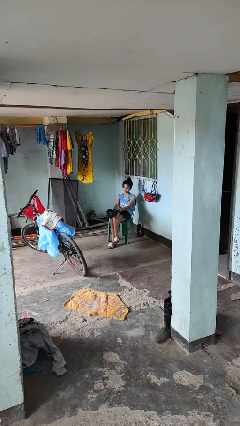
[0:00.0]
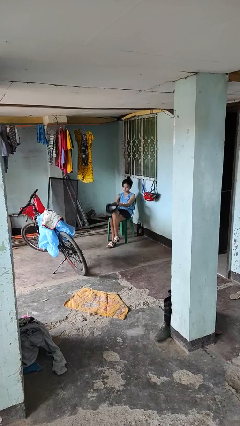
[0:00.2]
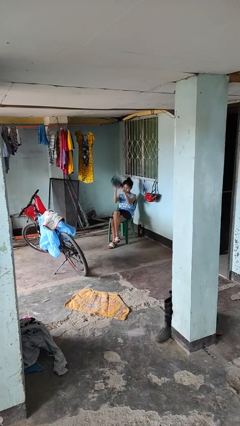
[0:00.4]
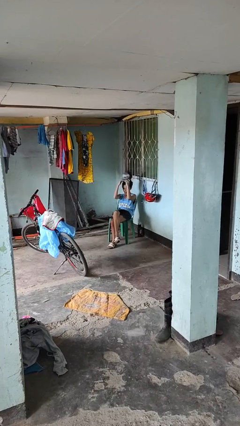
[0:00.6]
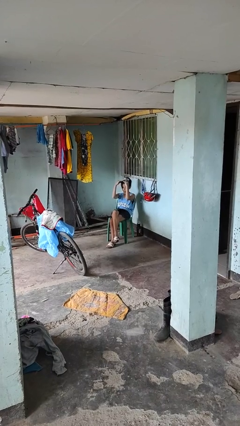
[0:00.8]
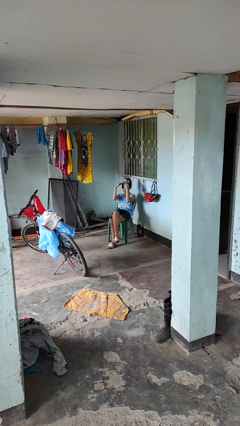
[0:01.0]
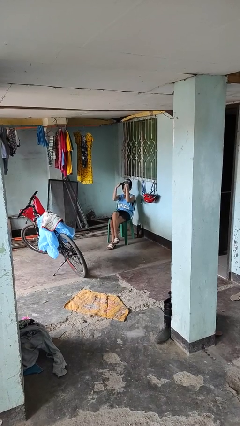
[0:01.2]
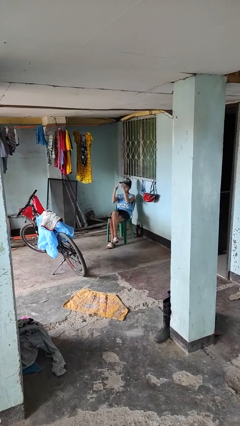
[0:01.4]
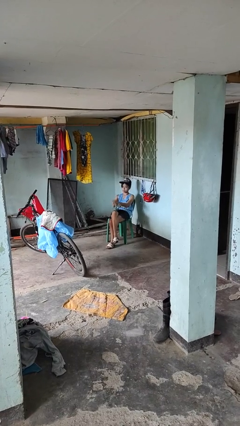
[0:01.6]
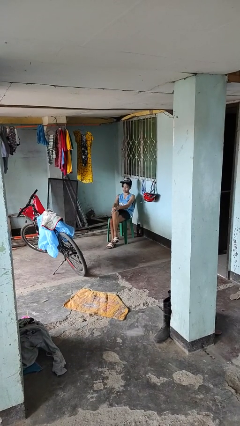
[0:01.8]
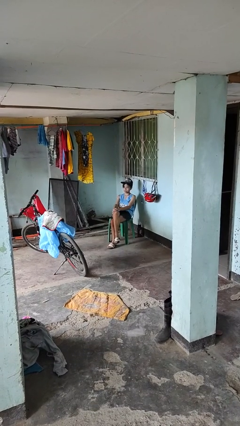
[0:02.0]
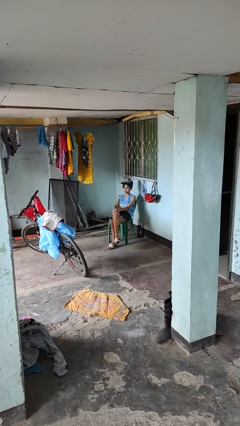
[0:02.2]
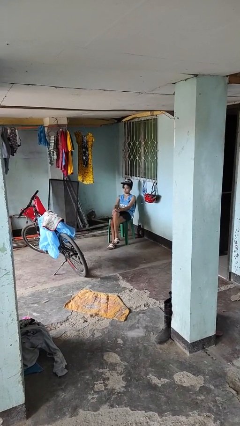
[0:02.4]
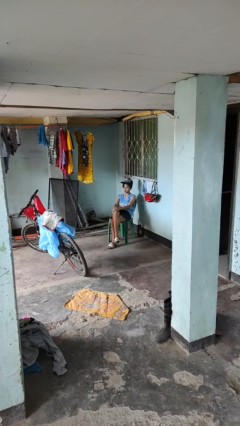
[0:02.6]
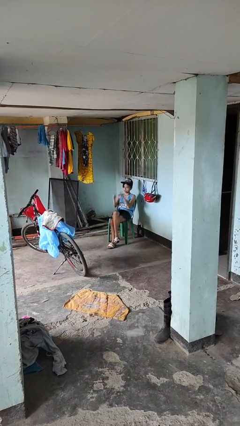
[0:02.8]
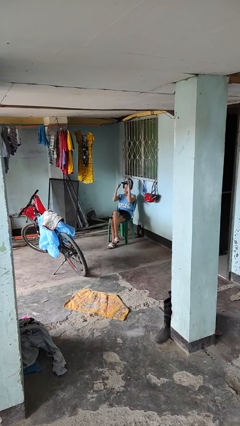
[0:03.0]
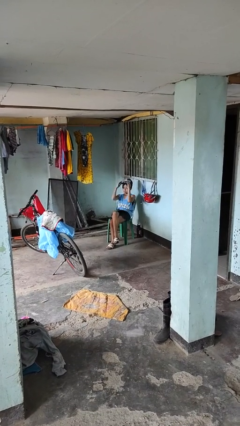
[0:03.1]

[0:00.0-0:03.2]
person puts on hat

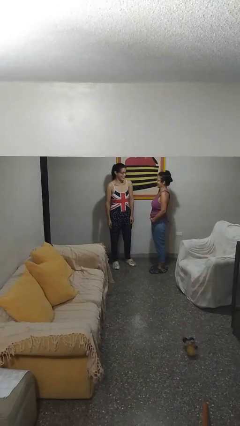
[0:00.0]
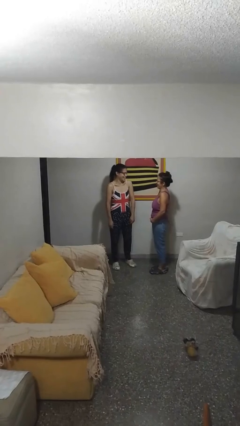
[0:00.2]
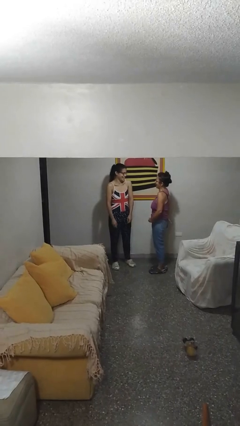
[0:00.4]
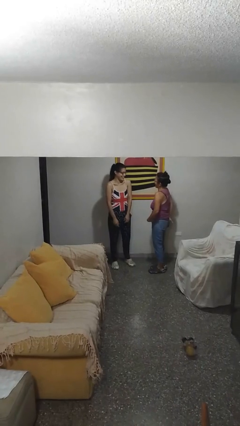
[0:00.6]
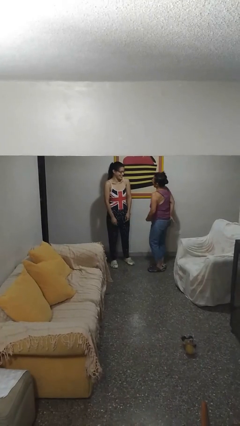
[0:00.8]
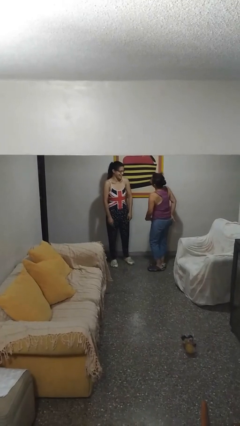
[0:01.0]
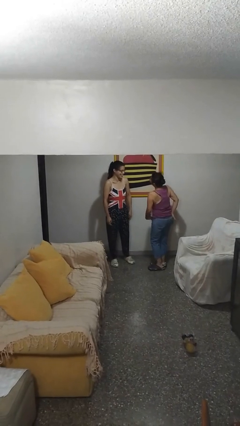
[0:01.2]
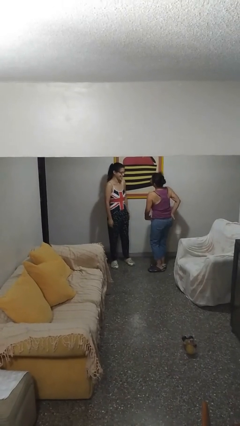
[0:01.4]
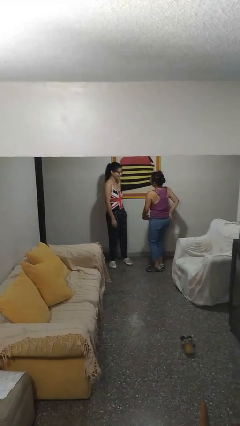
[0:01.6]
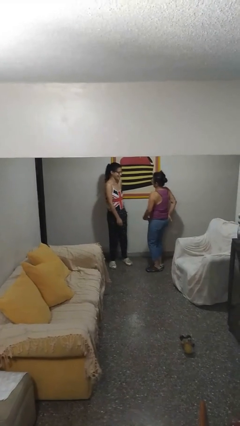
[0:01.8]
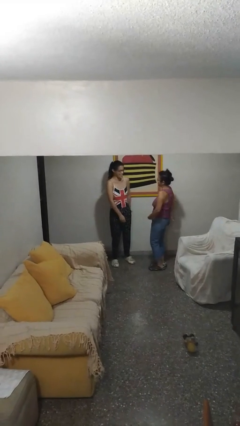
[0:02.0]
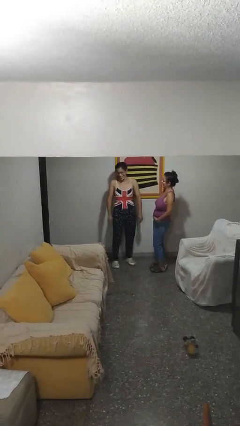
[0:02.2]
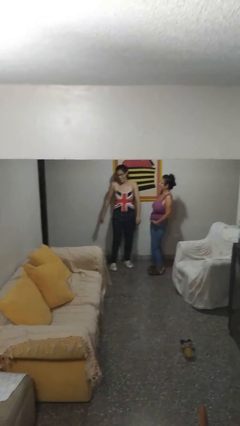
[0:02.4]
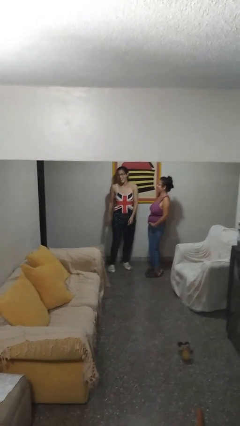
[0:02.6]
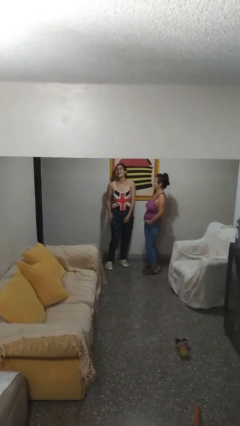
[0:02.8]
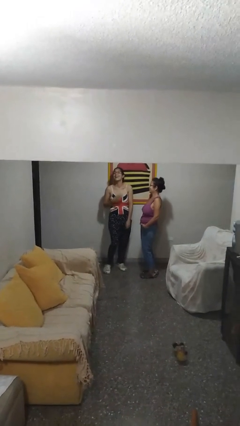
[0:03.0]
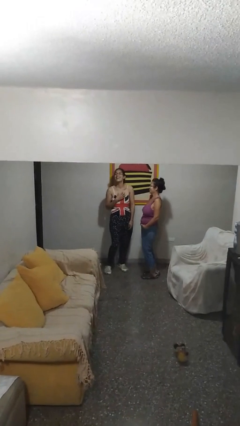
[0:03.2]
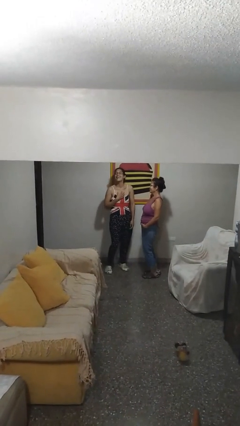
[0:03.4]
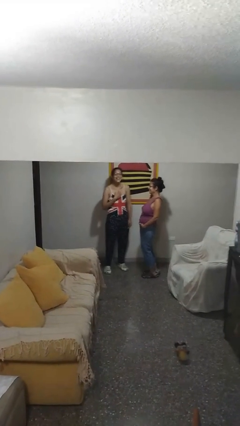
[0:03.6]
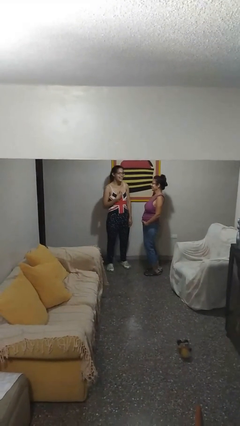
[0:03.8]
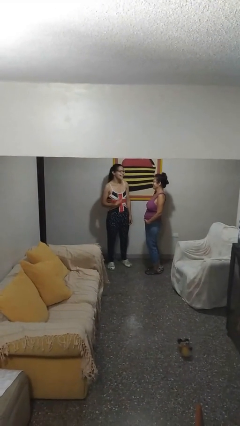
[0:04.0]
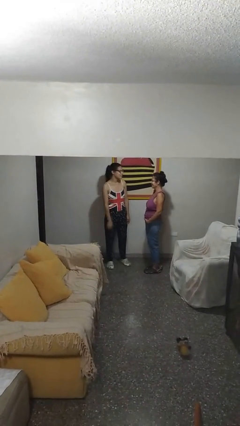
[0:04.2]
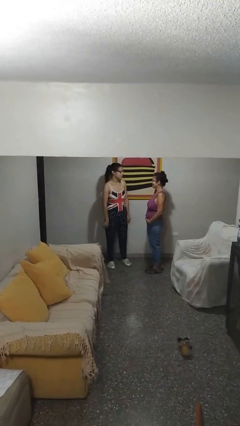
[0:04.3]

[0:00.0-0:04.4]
person laughs with person

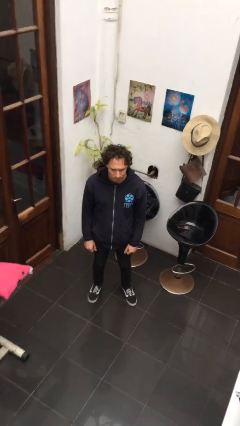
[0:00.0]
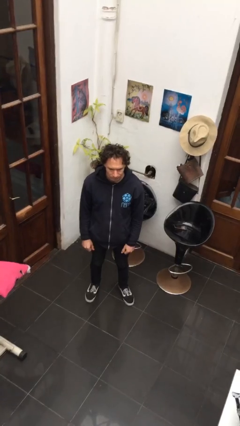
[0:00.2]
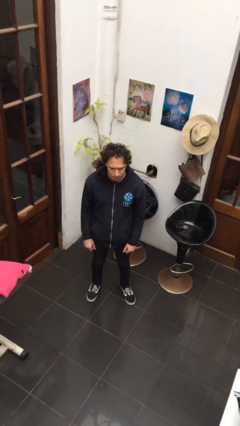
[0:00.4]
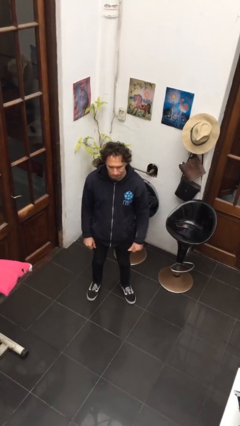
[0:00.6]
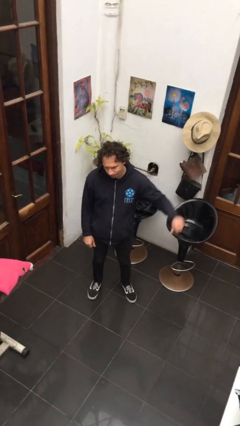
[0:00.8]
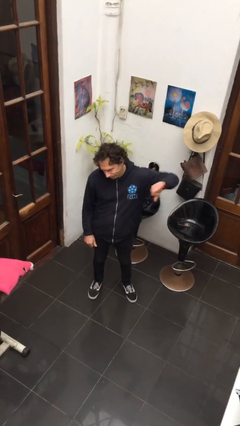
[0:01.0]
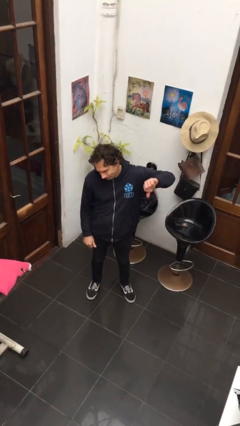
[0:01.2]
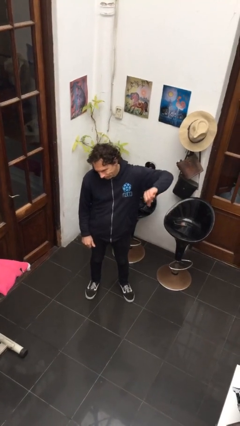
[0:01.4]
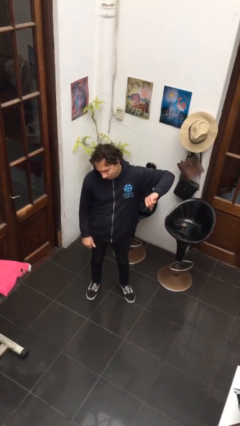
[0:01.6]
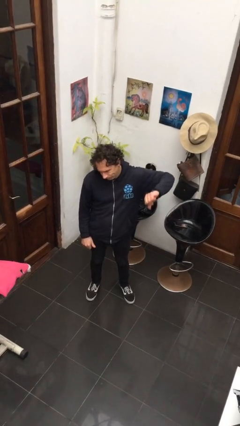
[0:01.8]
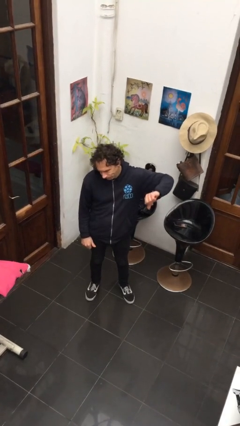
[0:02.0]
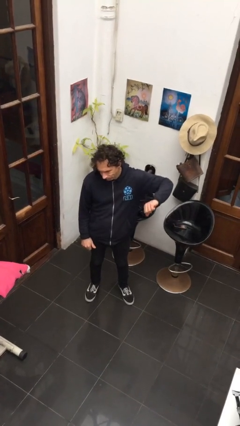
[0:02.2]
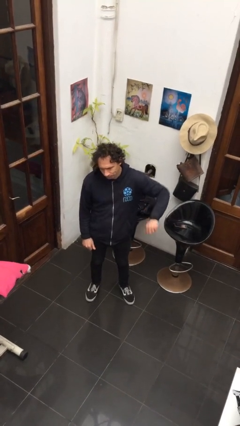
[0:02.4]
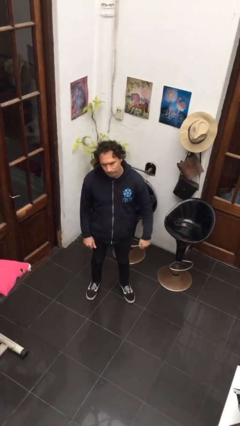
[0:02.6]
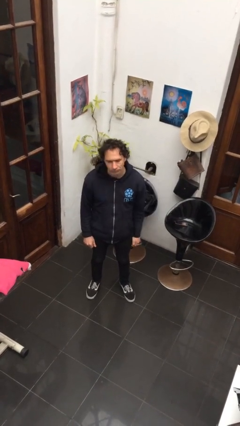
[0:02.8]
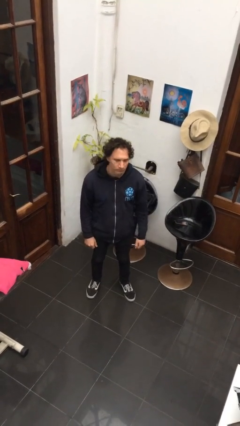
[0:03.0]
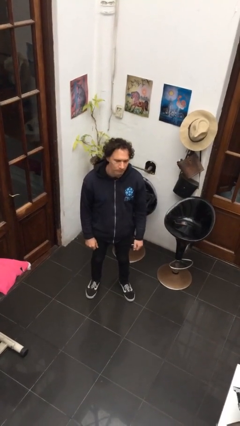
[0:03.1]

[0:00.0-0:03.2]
person gestures thumbs down

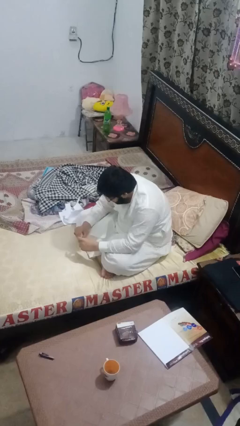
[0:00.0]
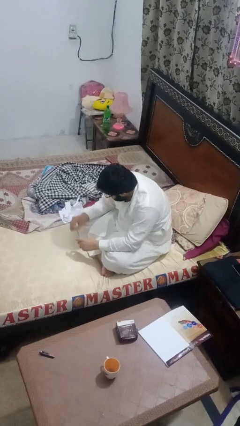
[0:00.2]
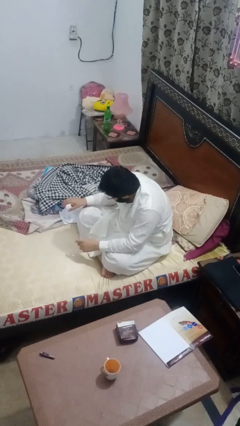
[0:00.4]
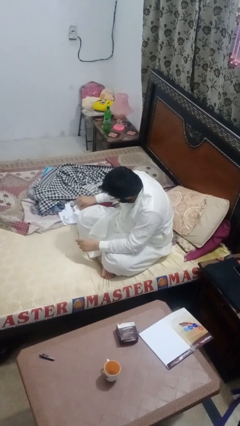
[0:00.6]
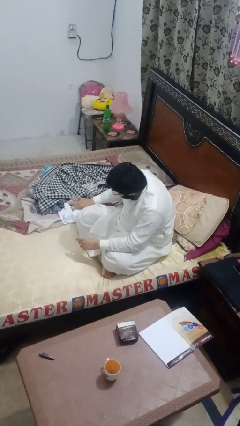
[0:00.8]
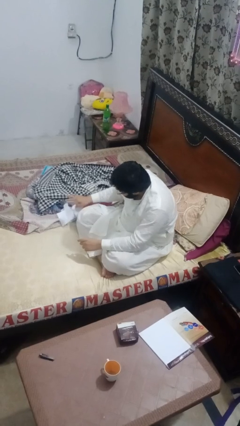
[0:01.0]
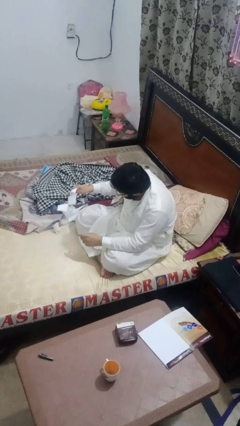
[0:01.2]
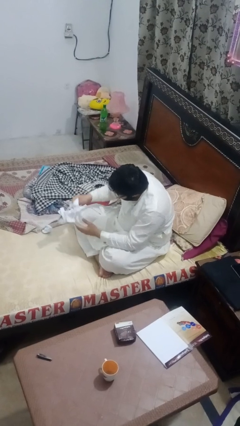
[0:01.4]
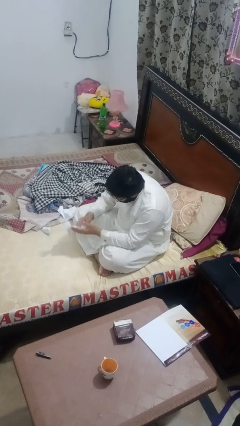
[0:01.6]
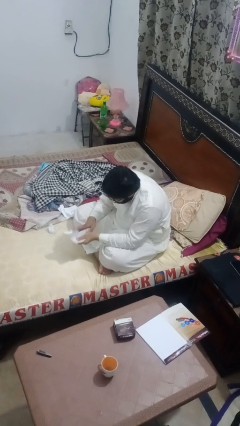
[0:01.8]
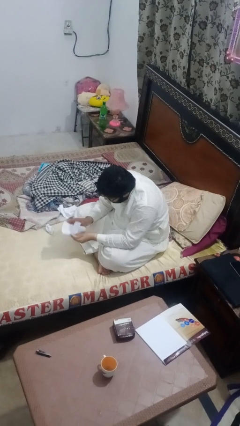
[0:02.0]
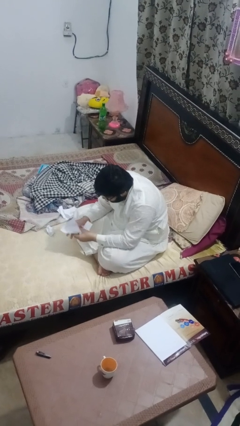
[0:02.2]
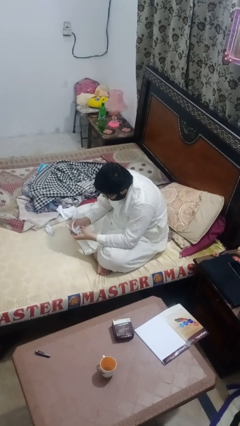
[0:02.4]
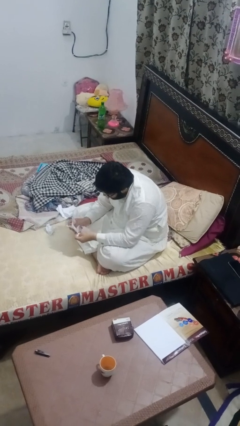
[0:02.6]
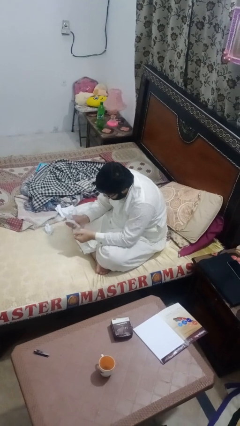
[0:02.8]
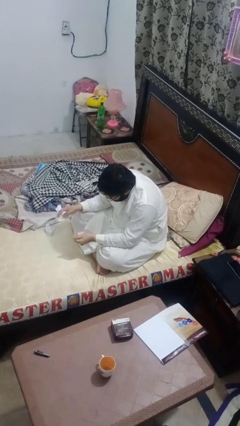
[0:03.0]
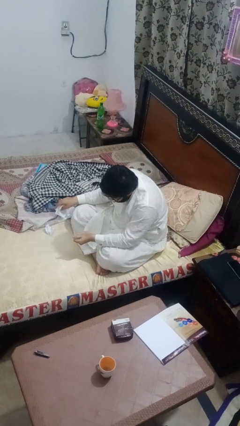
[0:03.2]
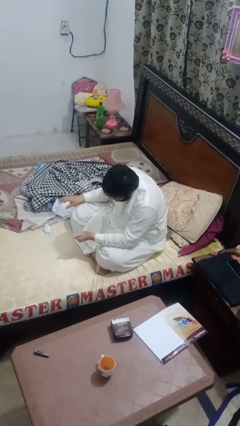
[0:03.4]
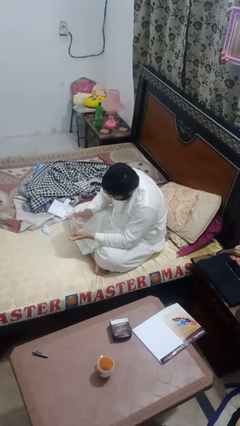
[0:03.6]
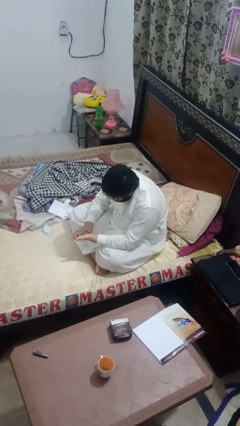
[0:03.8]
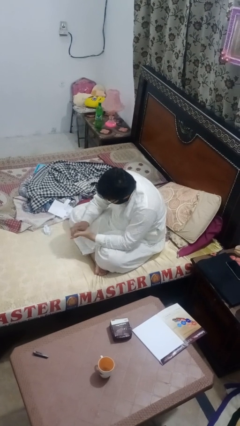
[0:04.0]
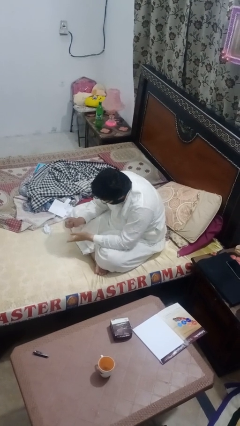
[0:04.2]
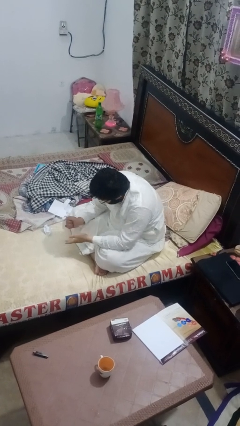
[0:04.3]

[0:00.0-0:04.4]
person crumples paper

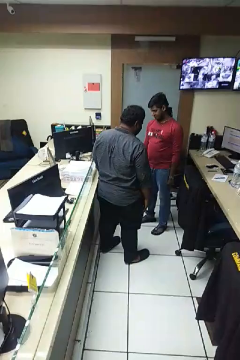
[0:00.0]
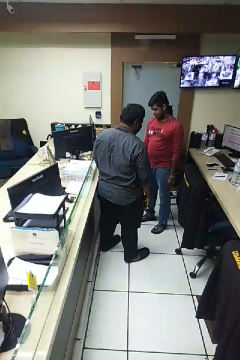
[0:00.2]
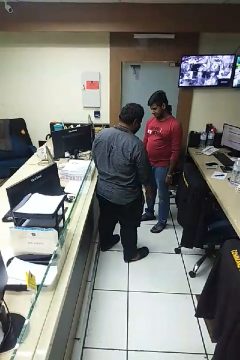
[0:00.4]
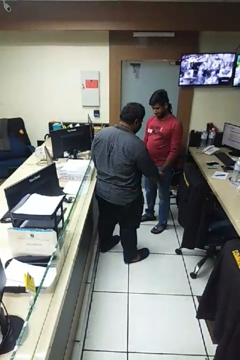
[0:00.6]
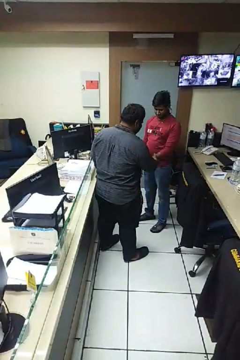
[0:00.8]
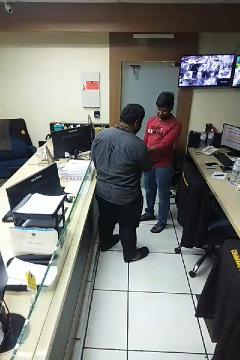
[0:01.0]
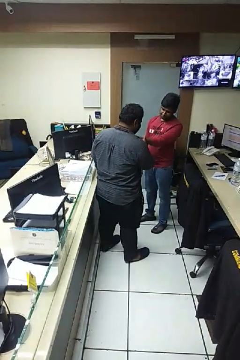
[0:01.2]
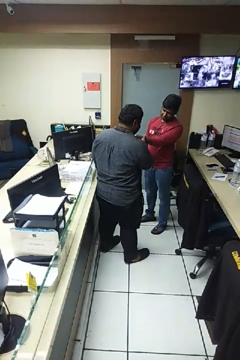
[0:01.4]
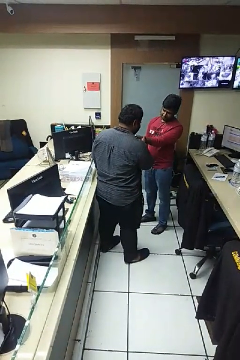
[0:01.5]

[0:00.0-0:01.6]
person grabs person by forearm

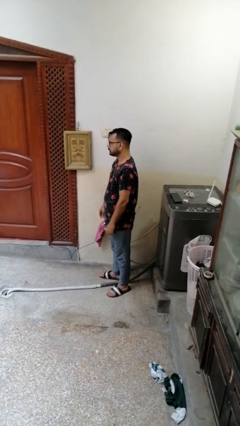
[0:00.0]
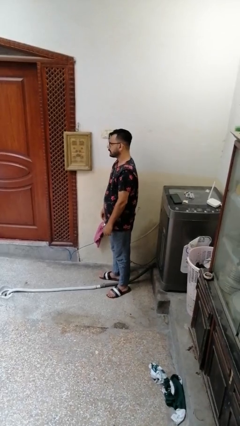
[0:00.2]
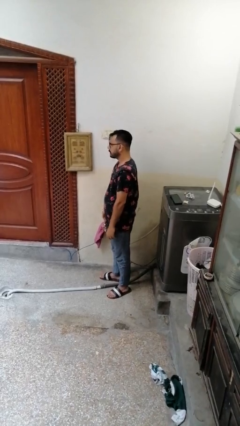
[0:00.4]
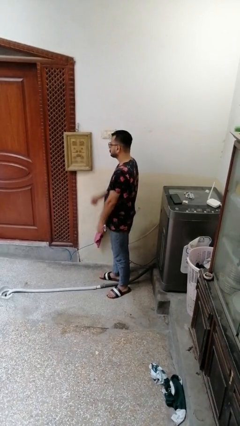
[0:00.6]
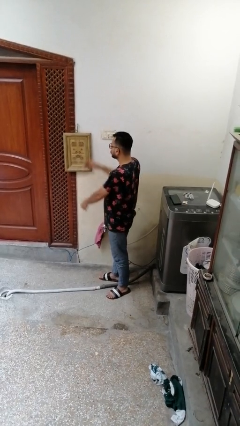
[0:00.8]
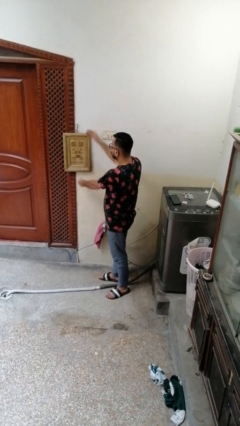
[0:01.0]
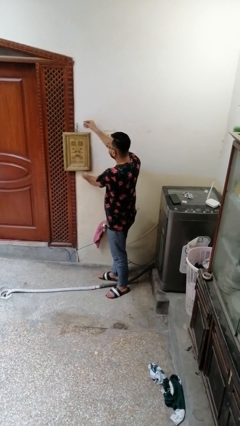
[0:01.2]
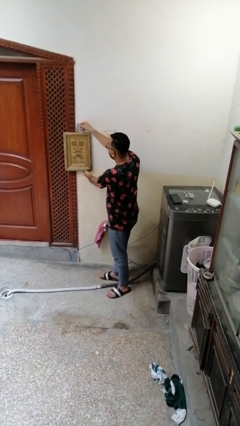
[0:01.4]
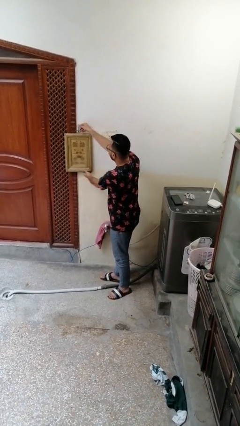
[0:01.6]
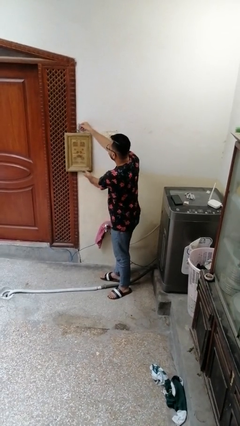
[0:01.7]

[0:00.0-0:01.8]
person takes down picture frame
